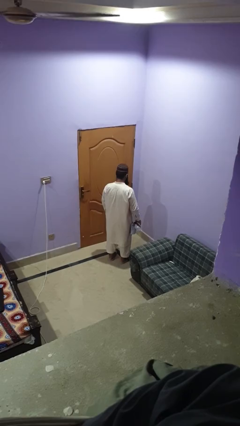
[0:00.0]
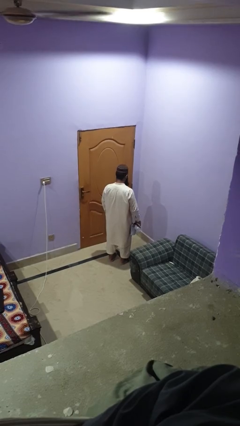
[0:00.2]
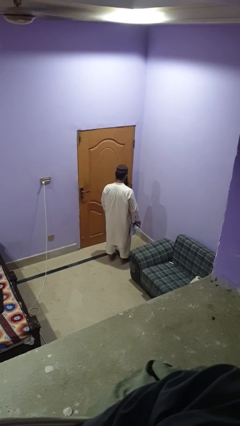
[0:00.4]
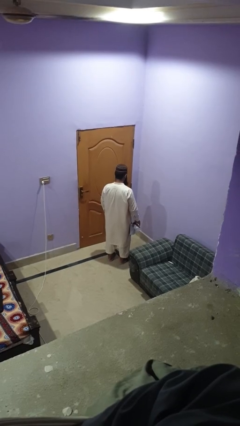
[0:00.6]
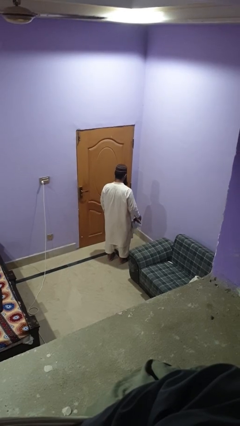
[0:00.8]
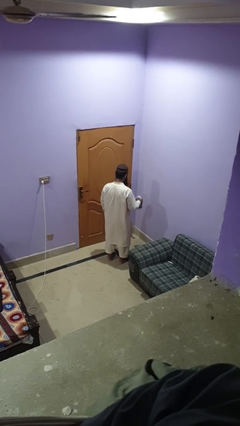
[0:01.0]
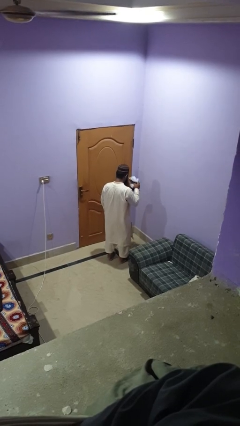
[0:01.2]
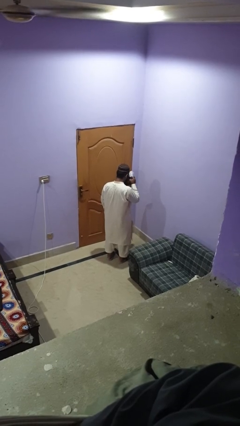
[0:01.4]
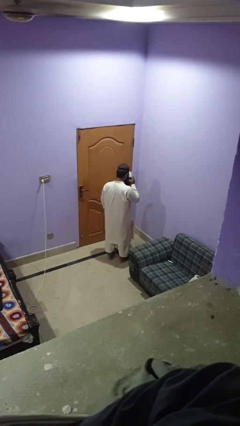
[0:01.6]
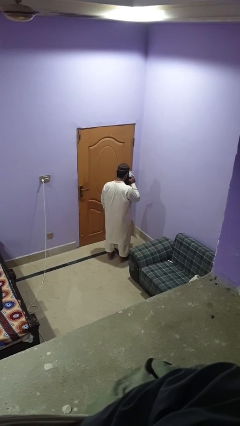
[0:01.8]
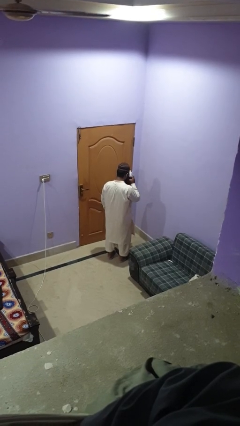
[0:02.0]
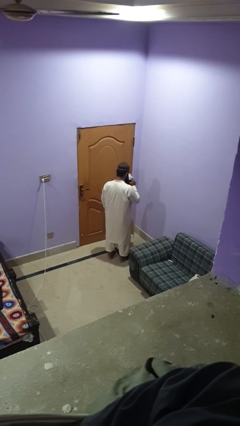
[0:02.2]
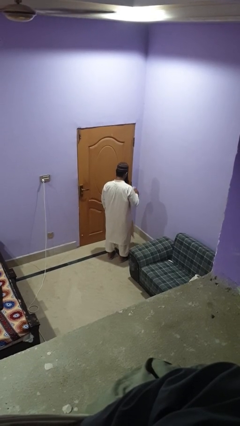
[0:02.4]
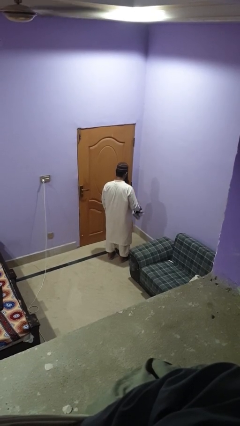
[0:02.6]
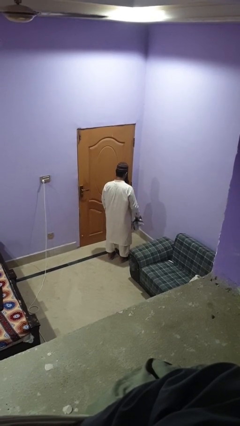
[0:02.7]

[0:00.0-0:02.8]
person blows nose

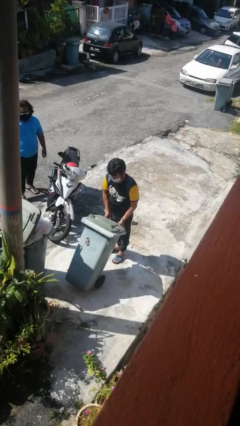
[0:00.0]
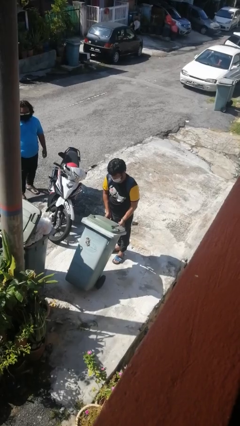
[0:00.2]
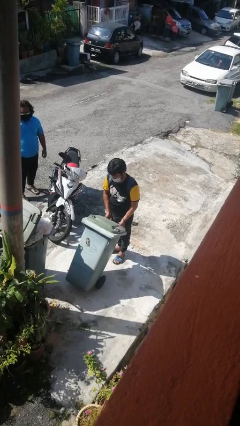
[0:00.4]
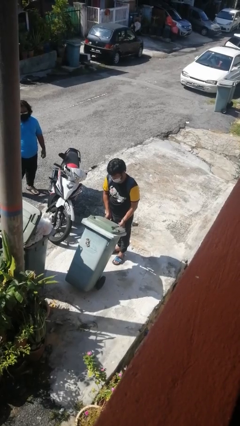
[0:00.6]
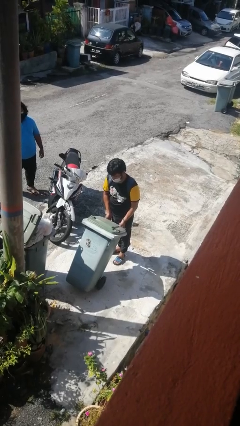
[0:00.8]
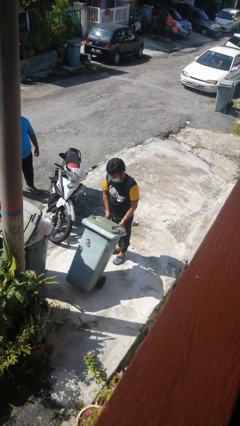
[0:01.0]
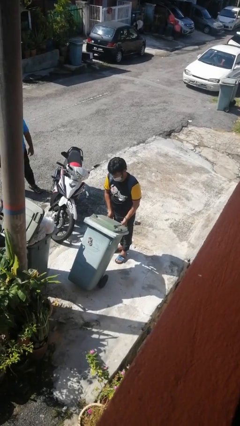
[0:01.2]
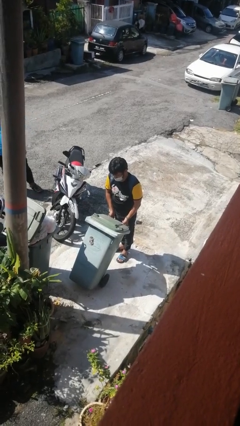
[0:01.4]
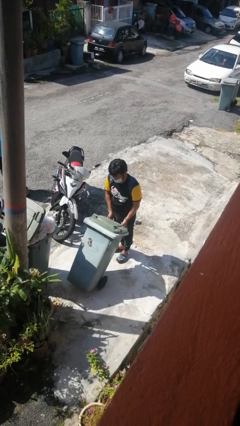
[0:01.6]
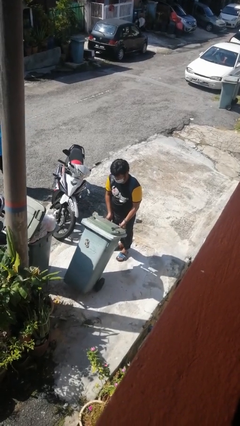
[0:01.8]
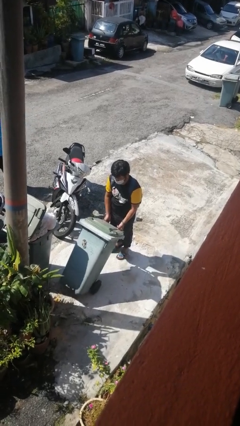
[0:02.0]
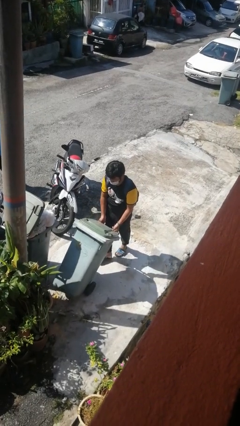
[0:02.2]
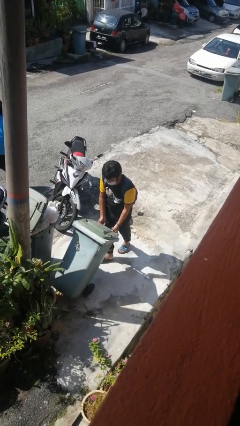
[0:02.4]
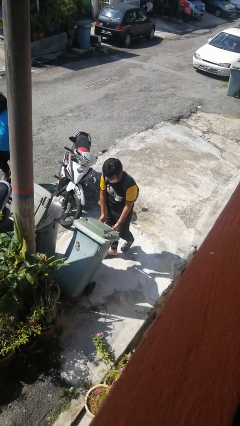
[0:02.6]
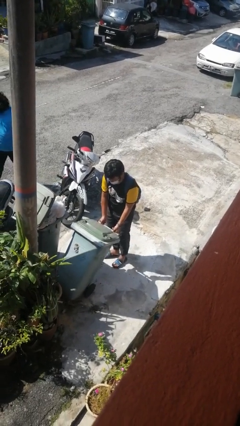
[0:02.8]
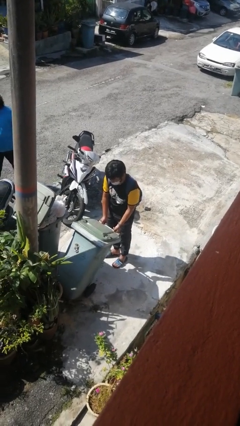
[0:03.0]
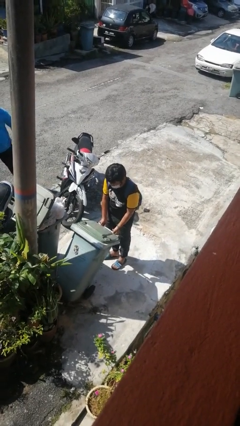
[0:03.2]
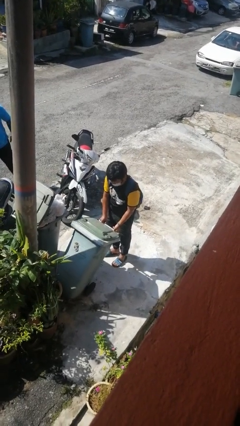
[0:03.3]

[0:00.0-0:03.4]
person pushes wheeled trashcan

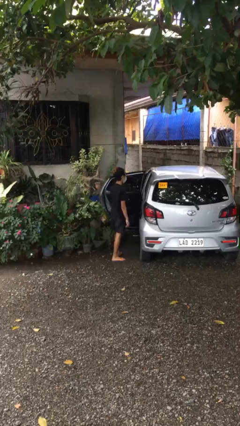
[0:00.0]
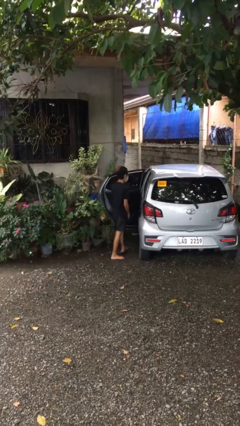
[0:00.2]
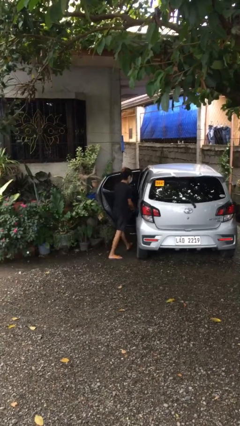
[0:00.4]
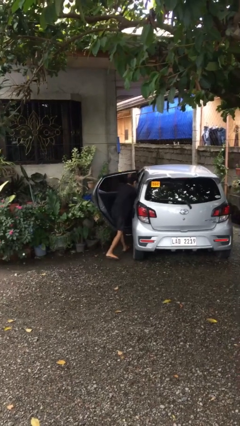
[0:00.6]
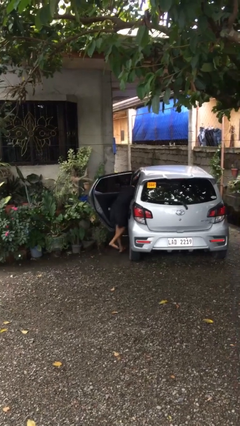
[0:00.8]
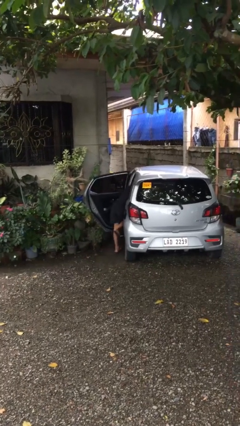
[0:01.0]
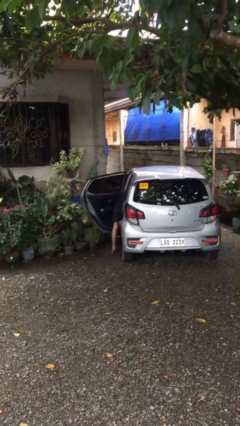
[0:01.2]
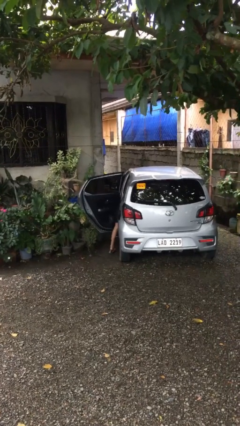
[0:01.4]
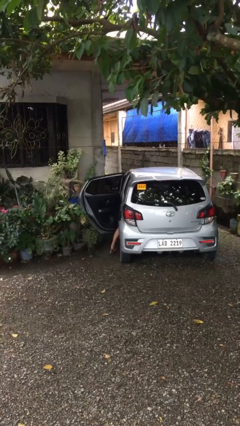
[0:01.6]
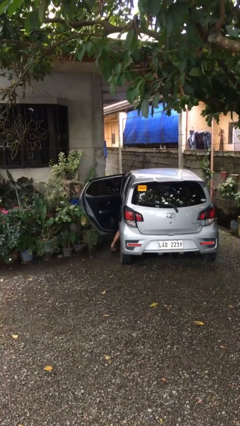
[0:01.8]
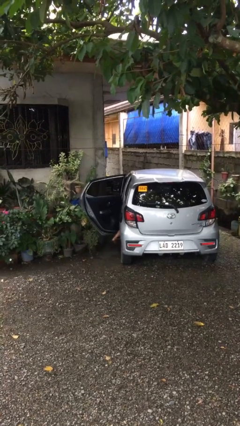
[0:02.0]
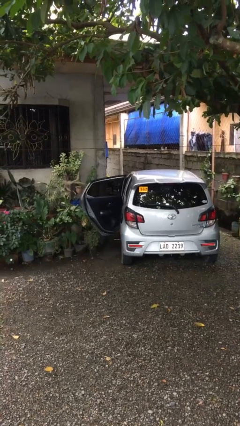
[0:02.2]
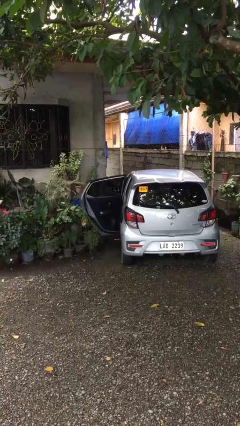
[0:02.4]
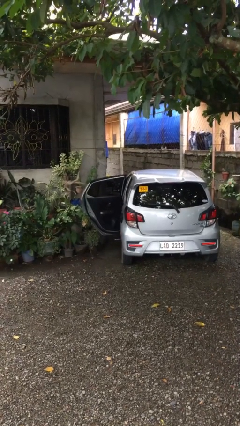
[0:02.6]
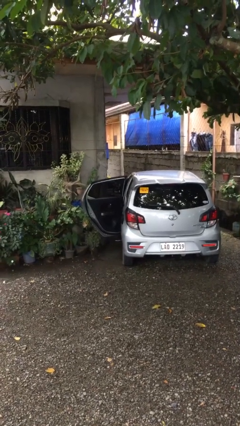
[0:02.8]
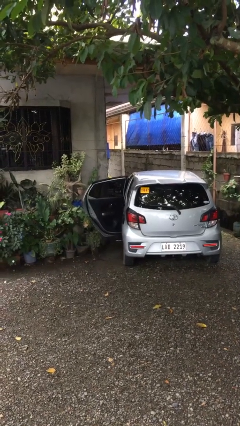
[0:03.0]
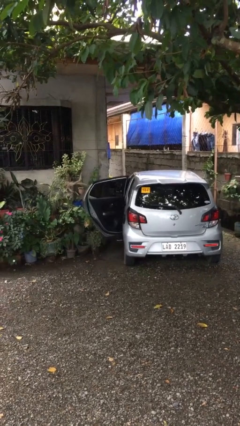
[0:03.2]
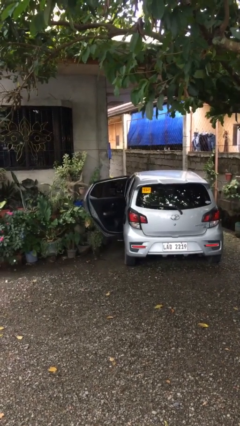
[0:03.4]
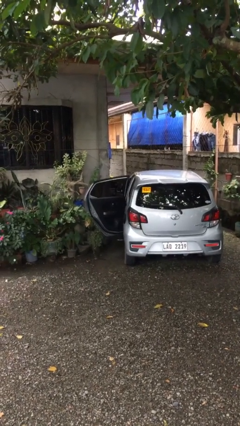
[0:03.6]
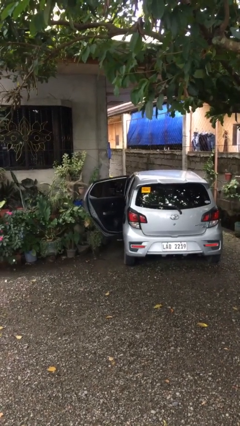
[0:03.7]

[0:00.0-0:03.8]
person enters car

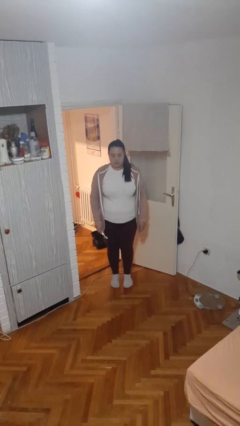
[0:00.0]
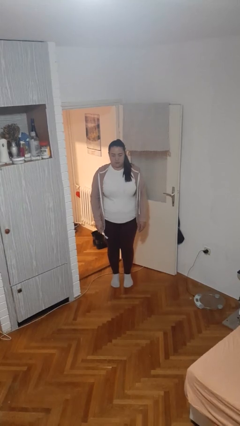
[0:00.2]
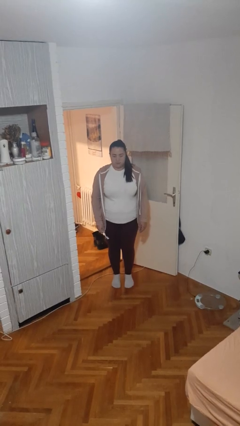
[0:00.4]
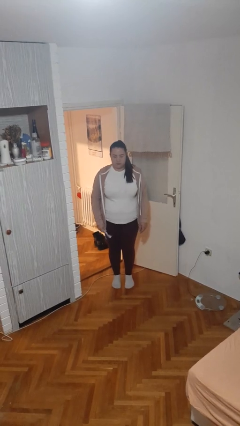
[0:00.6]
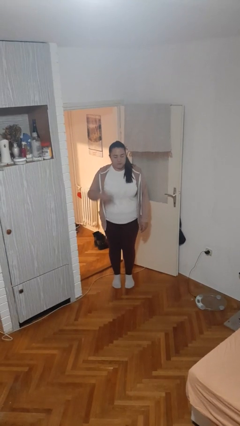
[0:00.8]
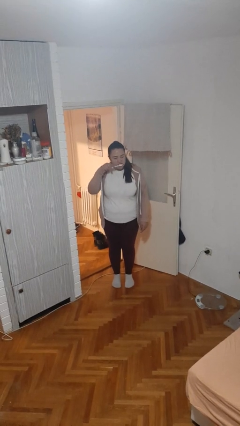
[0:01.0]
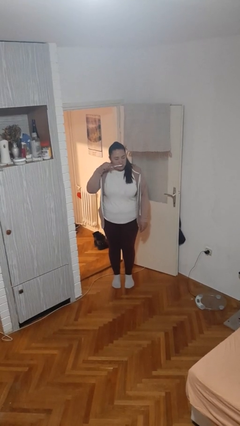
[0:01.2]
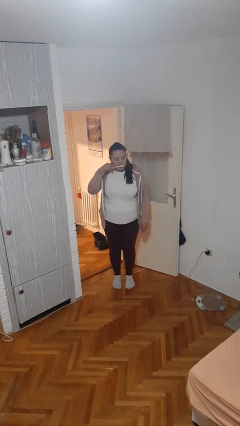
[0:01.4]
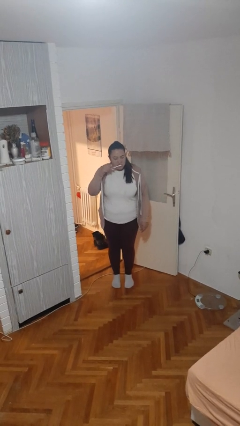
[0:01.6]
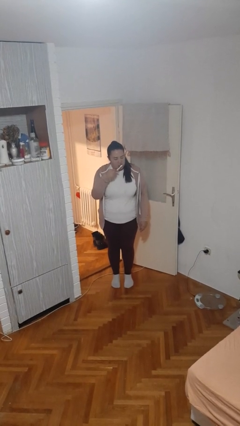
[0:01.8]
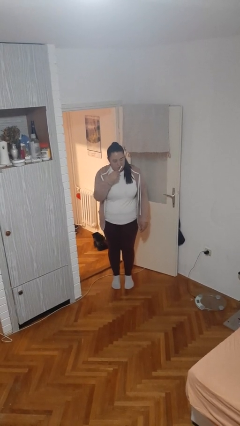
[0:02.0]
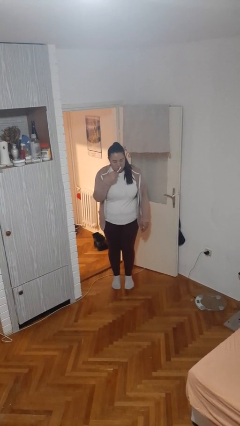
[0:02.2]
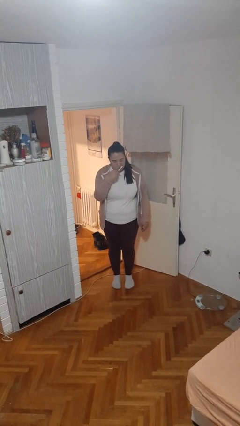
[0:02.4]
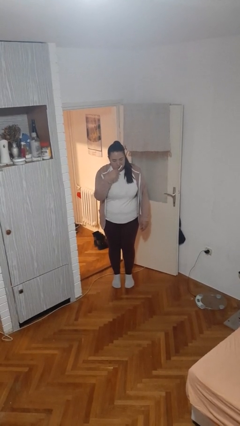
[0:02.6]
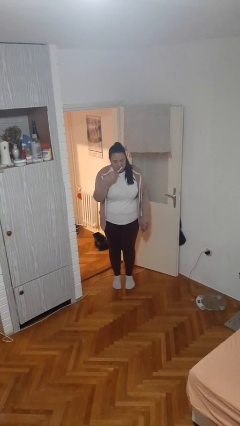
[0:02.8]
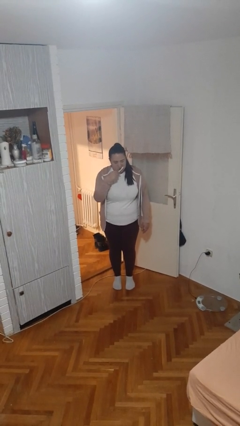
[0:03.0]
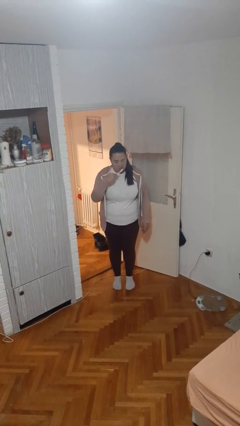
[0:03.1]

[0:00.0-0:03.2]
person brushes hair

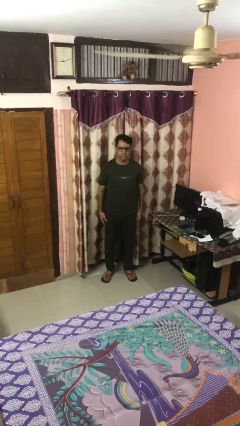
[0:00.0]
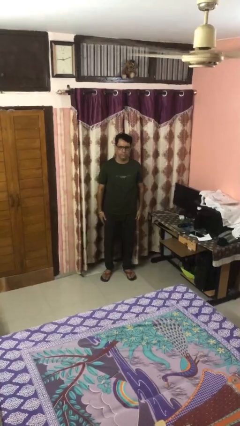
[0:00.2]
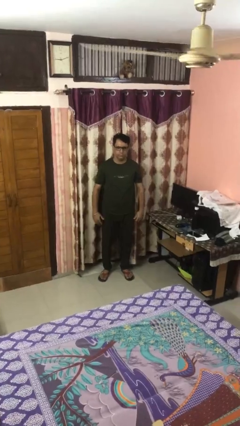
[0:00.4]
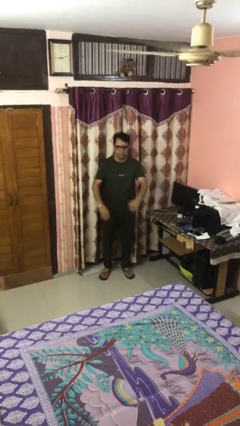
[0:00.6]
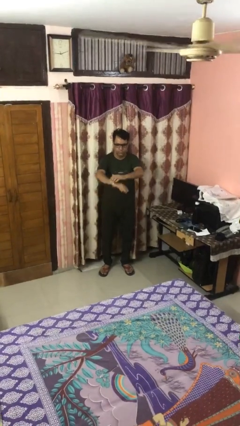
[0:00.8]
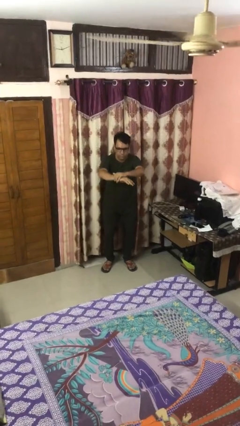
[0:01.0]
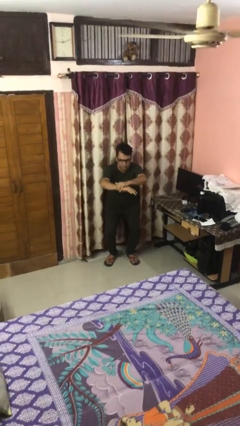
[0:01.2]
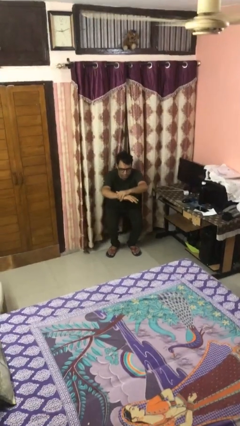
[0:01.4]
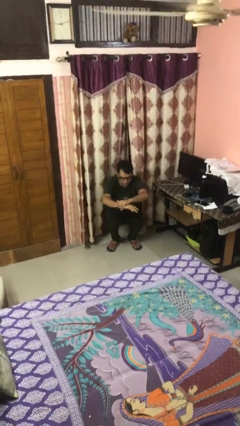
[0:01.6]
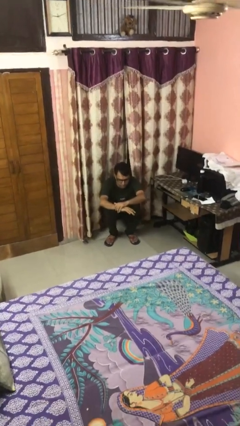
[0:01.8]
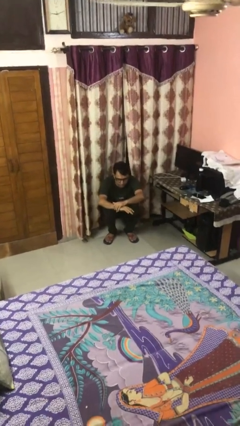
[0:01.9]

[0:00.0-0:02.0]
person squats

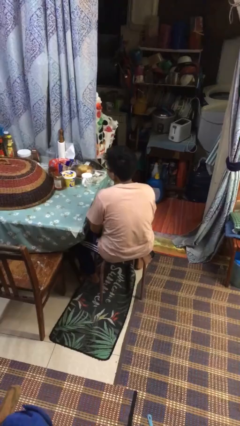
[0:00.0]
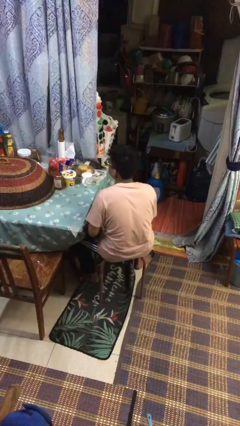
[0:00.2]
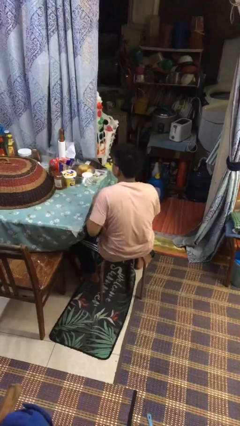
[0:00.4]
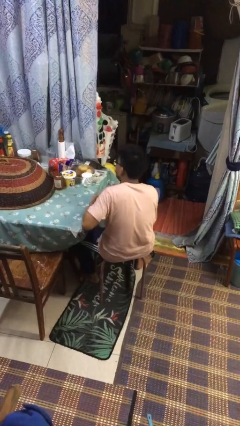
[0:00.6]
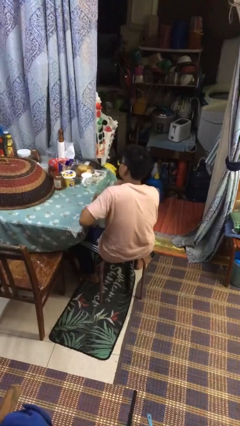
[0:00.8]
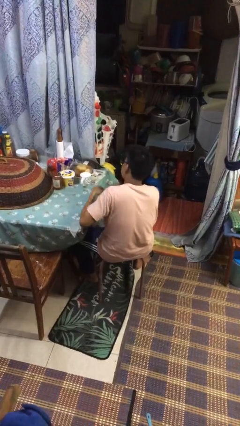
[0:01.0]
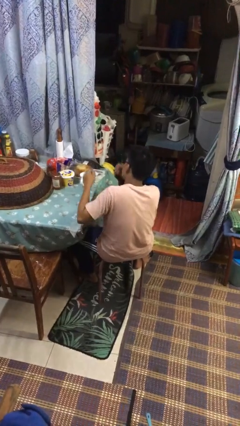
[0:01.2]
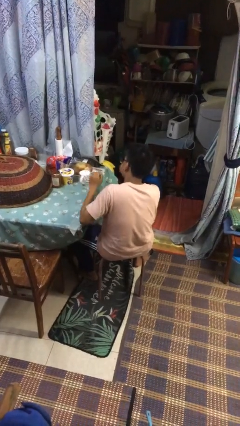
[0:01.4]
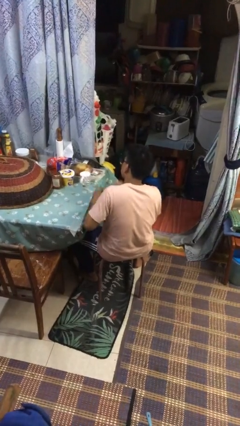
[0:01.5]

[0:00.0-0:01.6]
person drums on chest

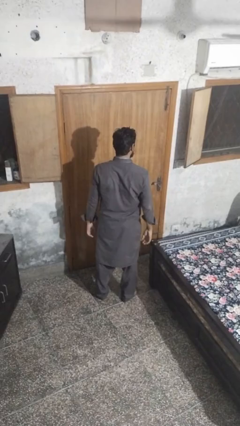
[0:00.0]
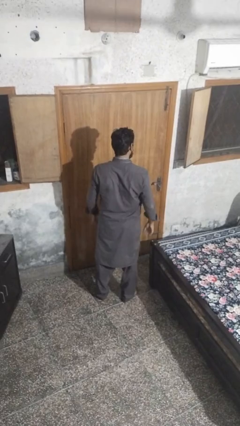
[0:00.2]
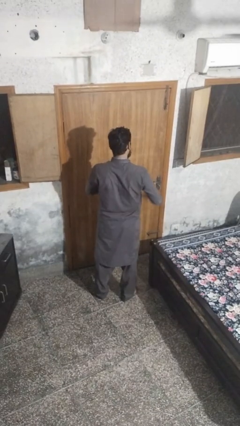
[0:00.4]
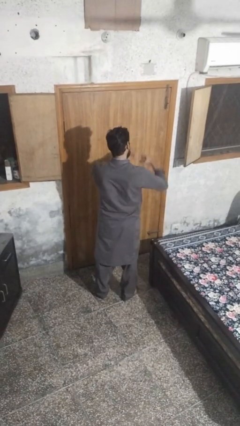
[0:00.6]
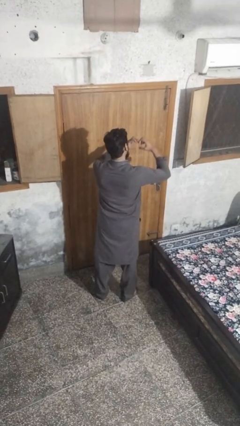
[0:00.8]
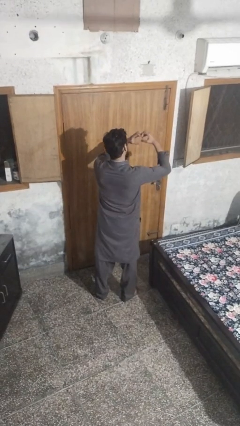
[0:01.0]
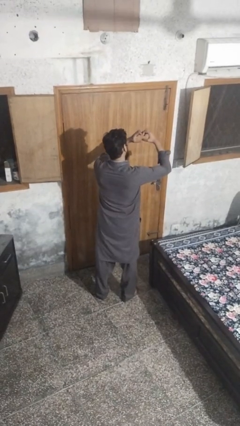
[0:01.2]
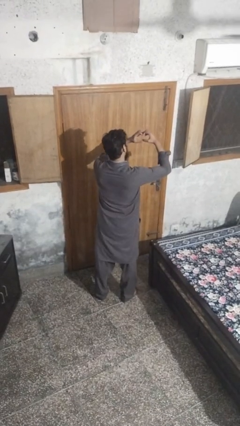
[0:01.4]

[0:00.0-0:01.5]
person gestures heart
